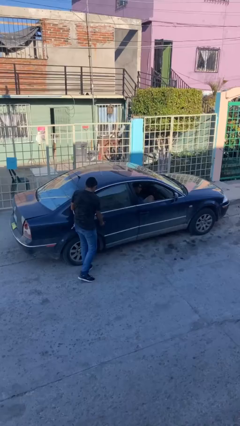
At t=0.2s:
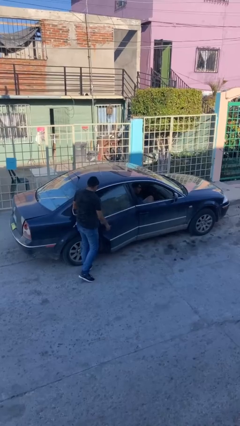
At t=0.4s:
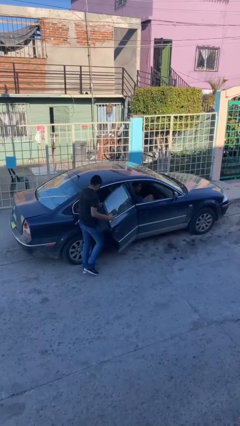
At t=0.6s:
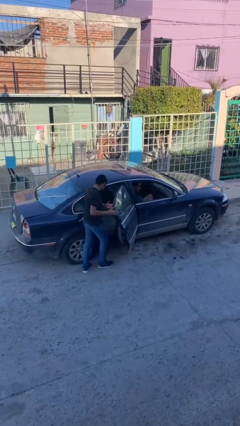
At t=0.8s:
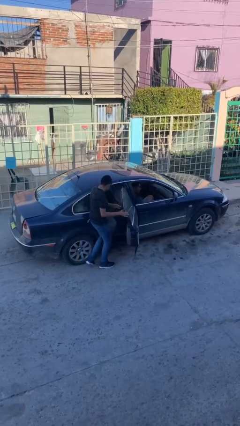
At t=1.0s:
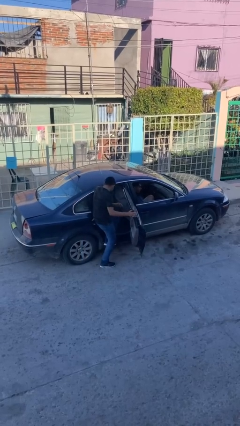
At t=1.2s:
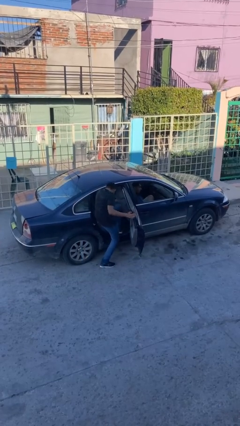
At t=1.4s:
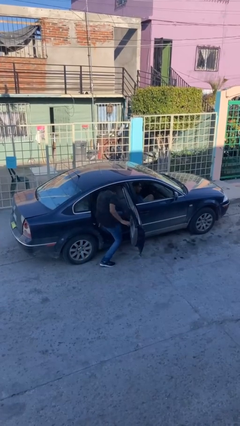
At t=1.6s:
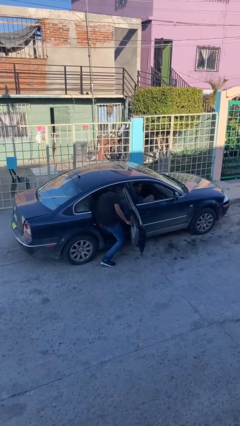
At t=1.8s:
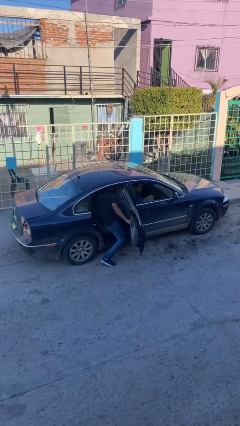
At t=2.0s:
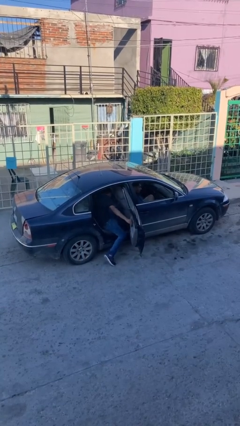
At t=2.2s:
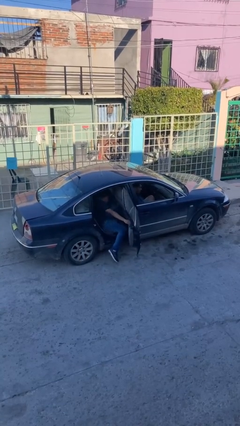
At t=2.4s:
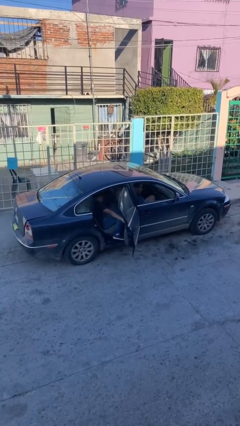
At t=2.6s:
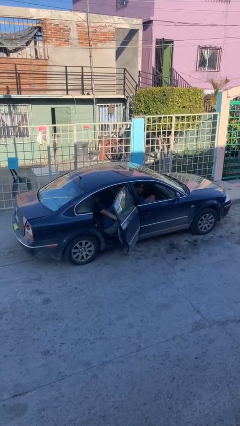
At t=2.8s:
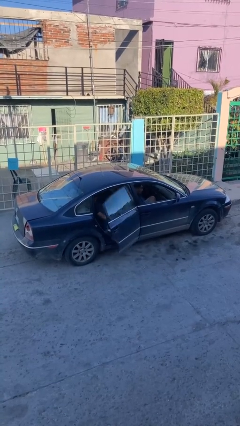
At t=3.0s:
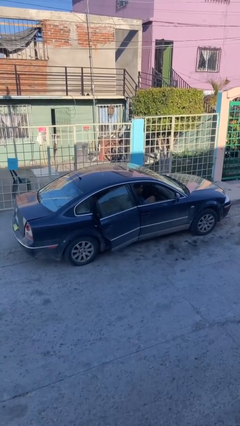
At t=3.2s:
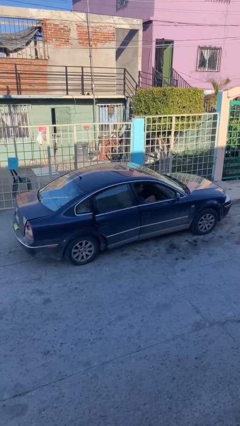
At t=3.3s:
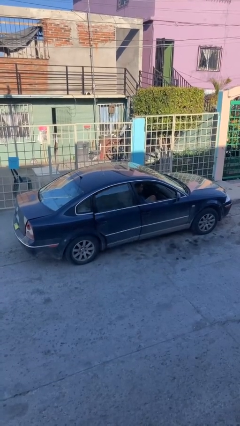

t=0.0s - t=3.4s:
car picks up person

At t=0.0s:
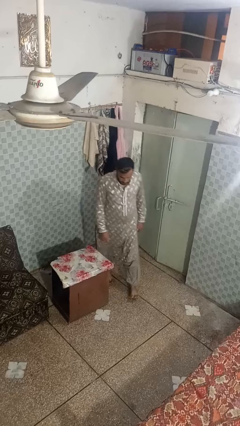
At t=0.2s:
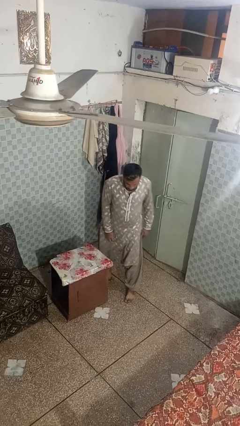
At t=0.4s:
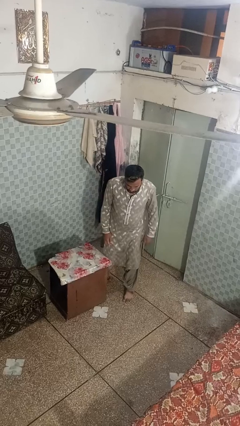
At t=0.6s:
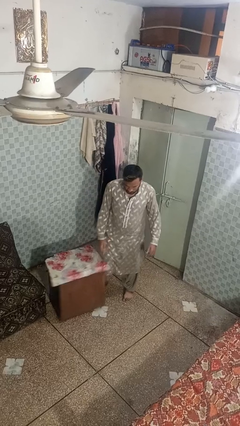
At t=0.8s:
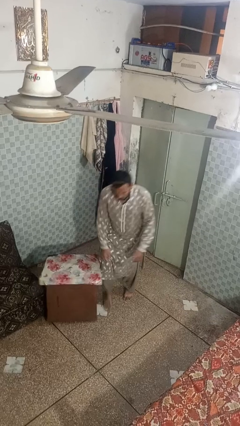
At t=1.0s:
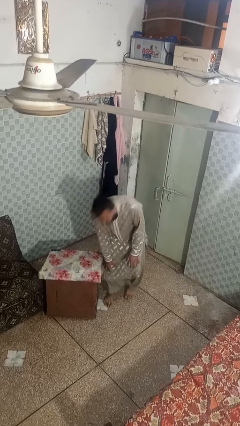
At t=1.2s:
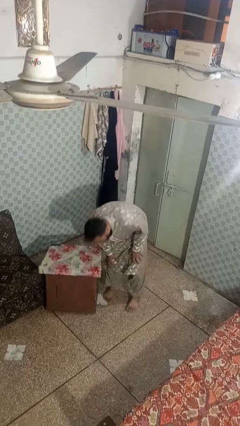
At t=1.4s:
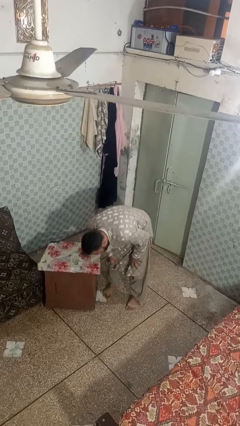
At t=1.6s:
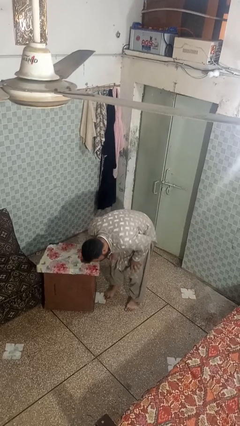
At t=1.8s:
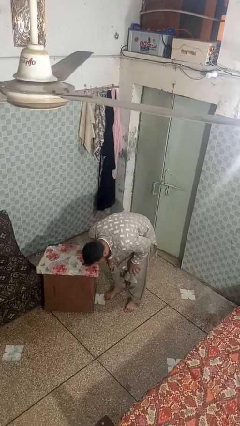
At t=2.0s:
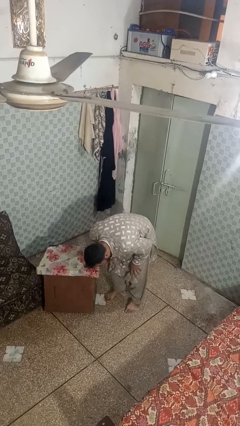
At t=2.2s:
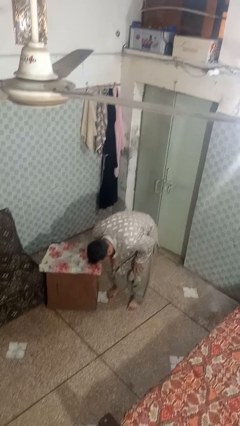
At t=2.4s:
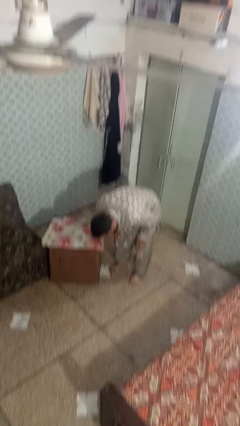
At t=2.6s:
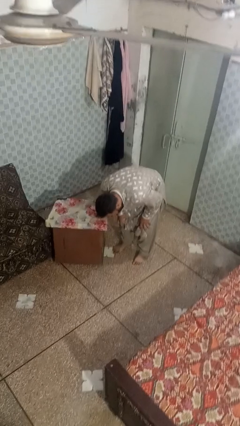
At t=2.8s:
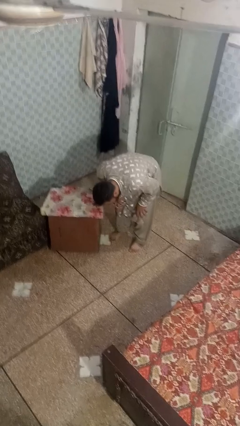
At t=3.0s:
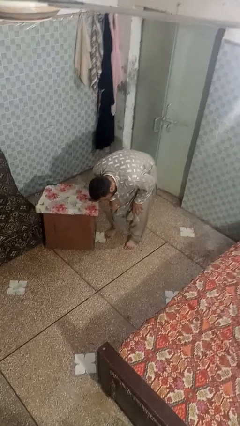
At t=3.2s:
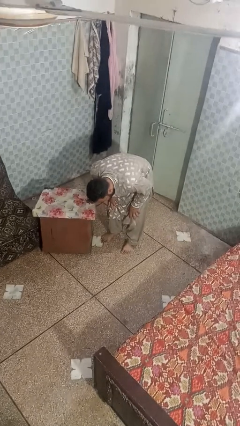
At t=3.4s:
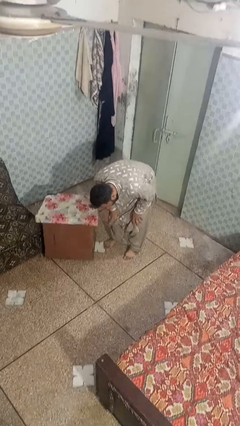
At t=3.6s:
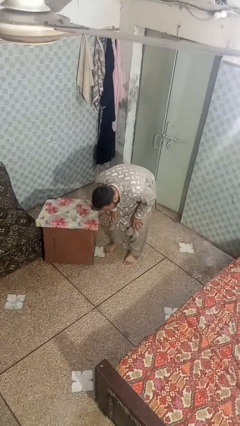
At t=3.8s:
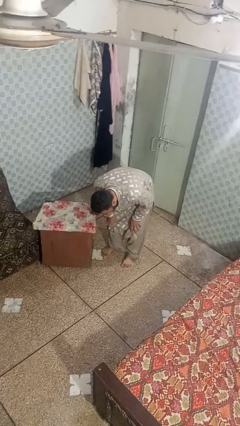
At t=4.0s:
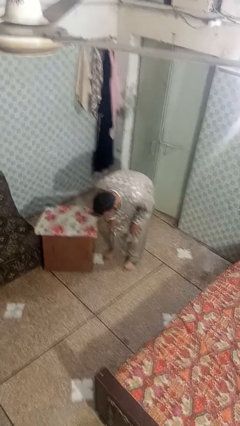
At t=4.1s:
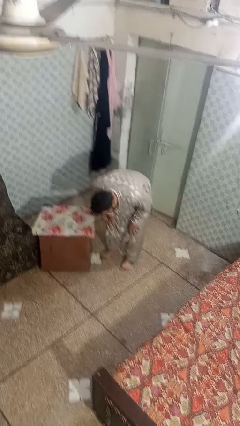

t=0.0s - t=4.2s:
person trips on object on floor

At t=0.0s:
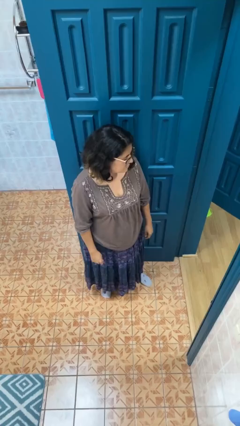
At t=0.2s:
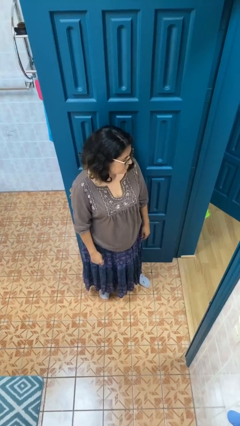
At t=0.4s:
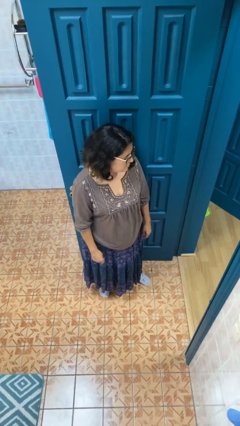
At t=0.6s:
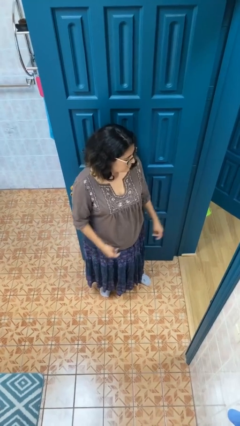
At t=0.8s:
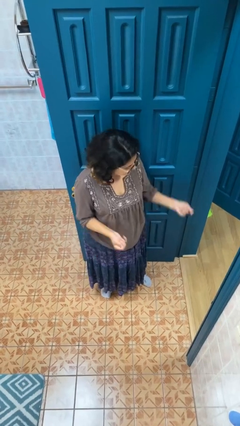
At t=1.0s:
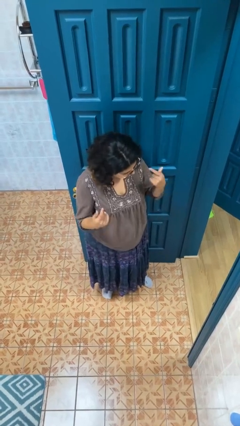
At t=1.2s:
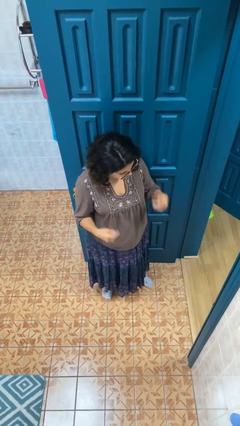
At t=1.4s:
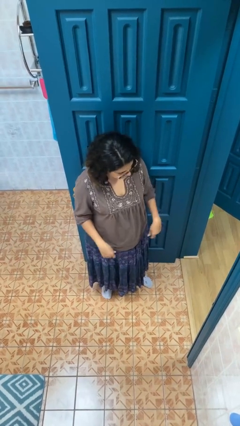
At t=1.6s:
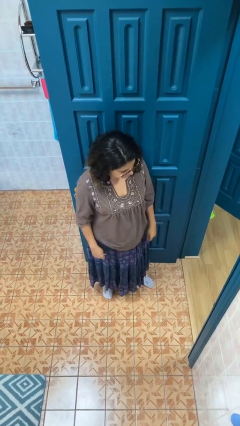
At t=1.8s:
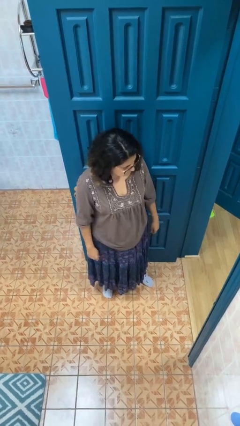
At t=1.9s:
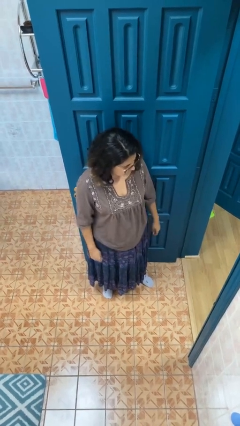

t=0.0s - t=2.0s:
person snaps fingers

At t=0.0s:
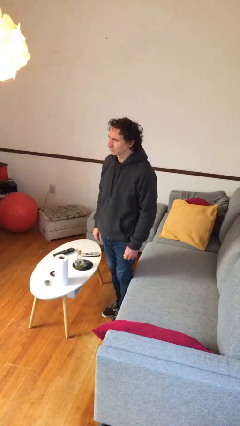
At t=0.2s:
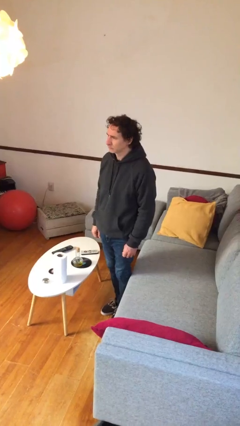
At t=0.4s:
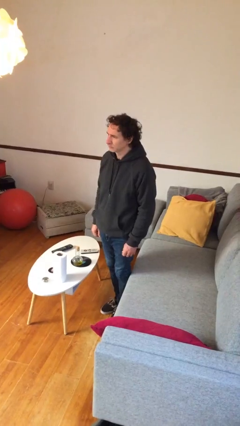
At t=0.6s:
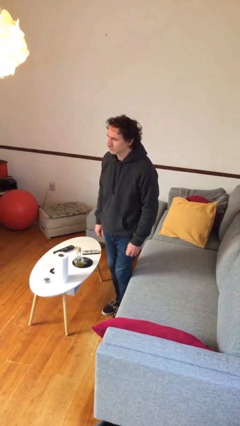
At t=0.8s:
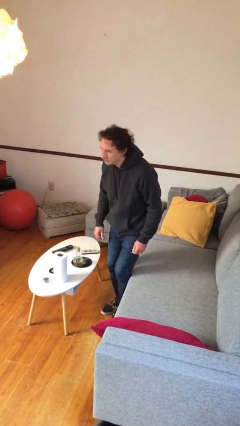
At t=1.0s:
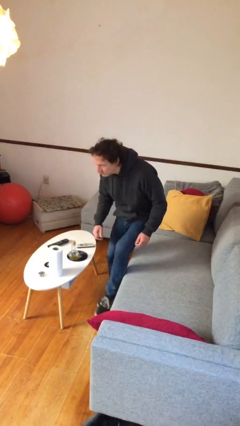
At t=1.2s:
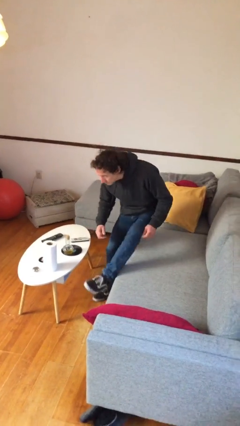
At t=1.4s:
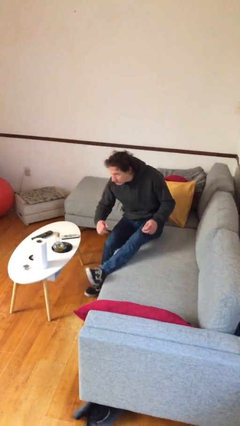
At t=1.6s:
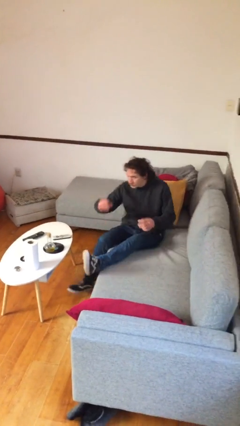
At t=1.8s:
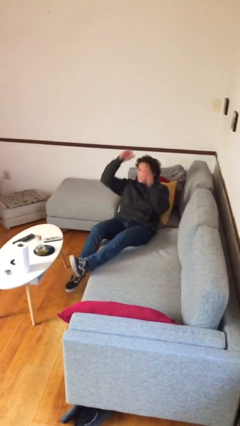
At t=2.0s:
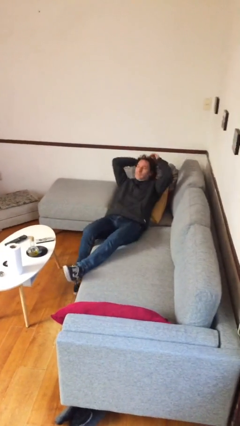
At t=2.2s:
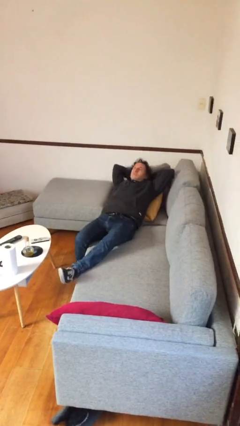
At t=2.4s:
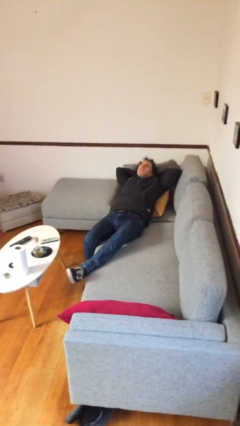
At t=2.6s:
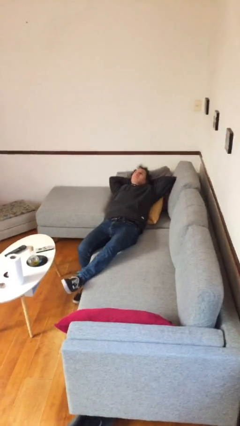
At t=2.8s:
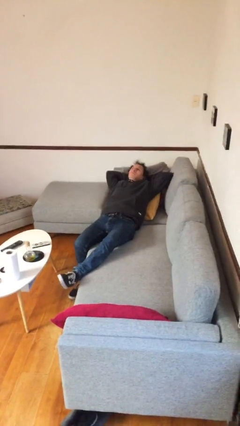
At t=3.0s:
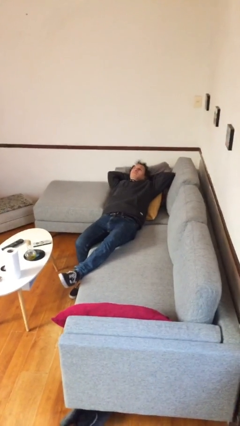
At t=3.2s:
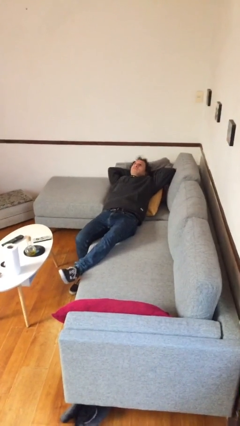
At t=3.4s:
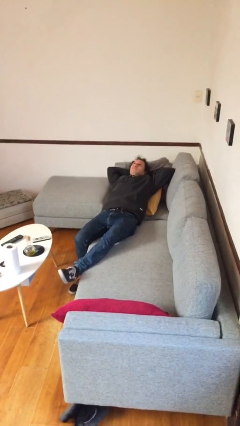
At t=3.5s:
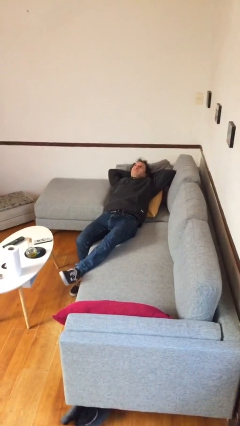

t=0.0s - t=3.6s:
person lies down on couch

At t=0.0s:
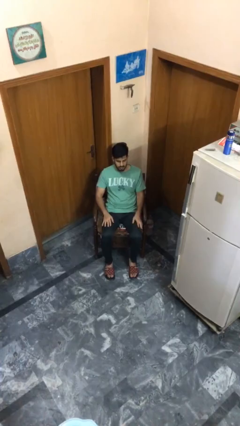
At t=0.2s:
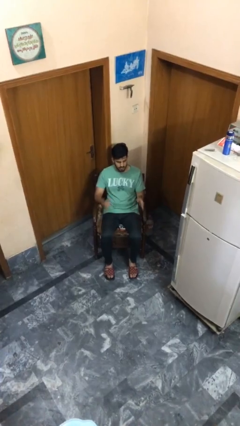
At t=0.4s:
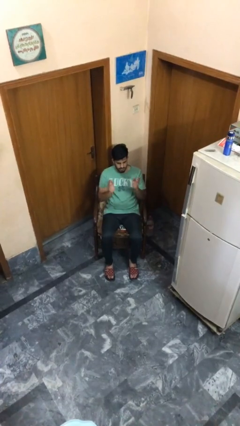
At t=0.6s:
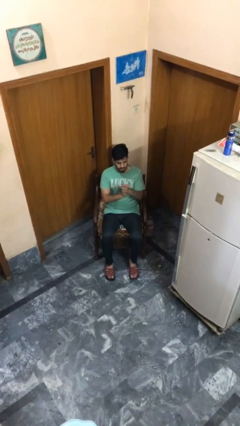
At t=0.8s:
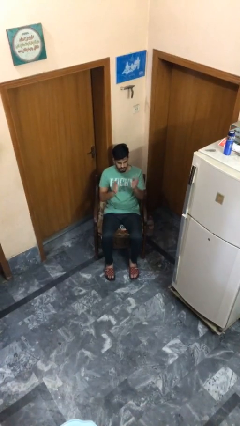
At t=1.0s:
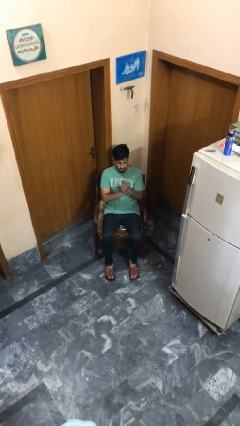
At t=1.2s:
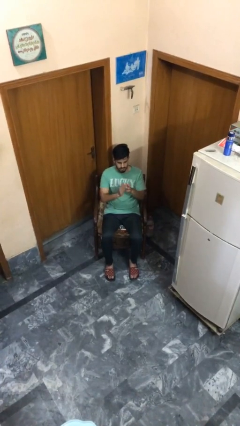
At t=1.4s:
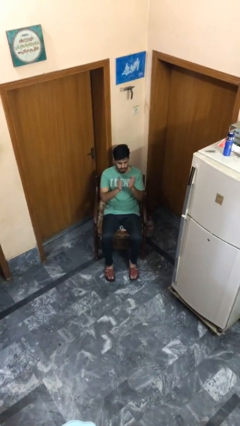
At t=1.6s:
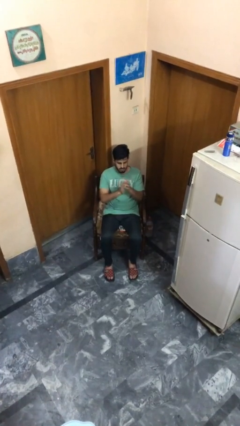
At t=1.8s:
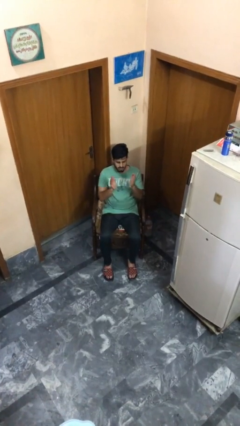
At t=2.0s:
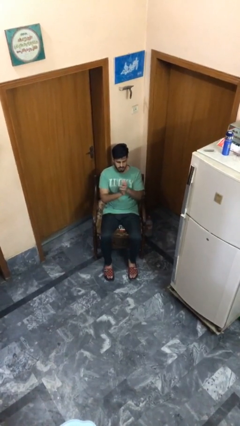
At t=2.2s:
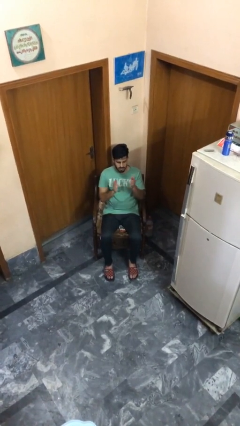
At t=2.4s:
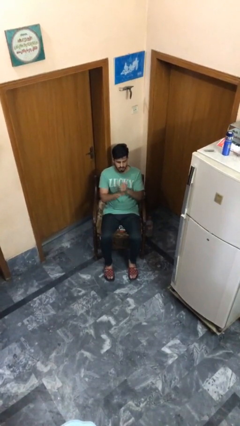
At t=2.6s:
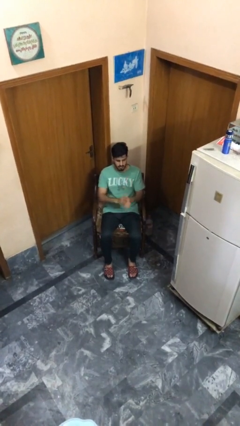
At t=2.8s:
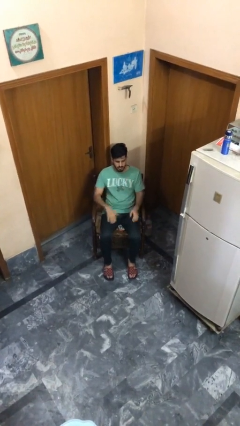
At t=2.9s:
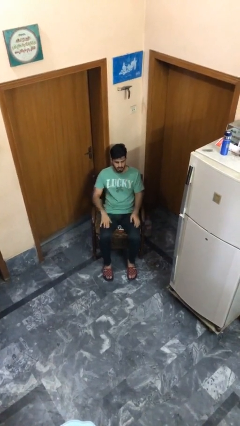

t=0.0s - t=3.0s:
person claps hands

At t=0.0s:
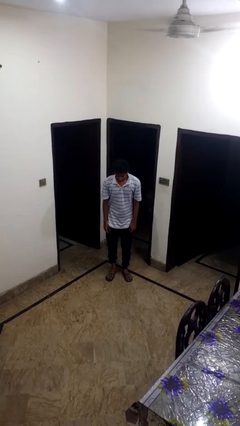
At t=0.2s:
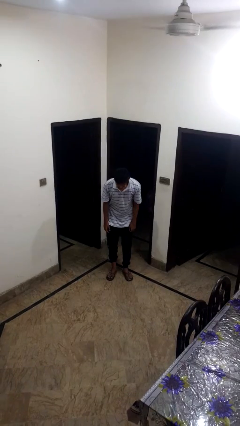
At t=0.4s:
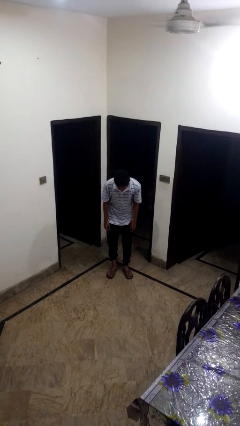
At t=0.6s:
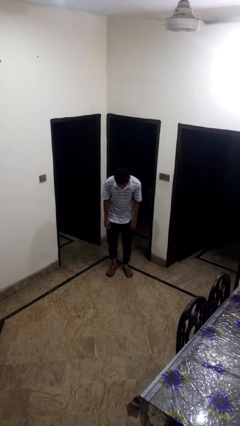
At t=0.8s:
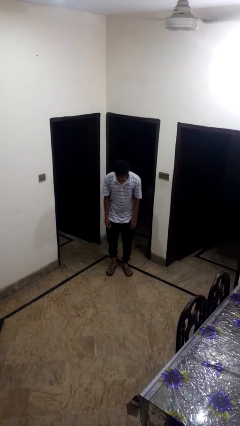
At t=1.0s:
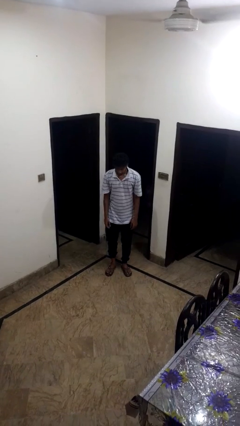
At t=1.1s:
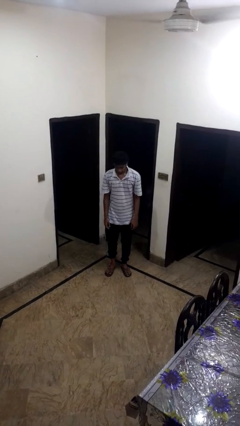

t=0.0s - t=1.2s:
person bows
